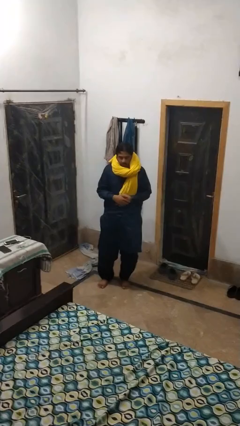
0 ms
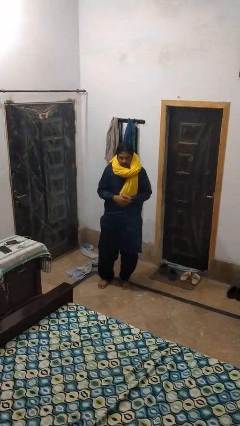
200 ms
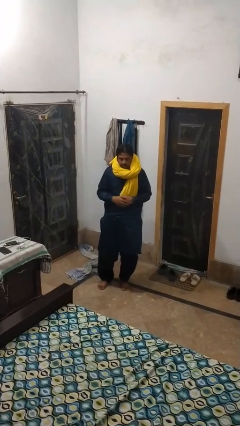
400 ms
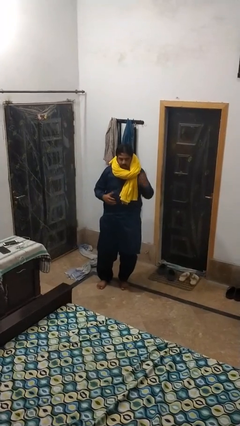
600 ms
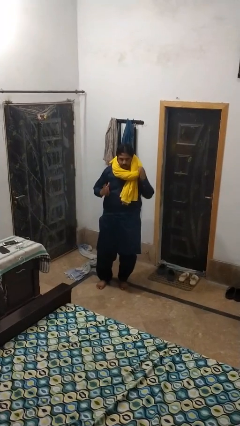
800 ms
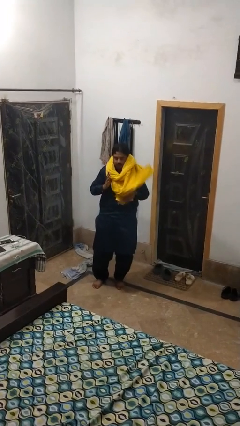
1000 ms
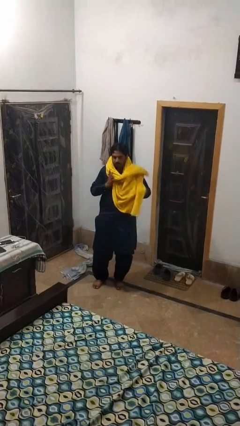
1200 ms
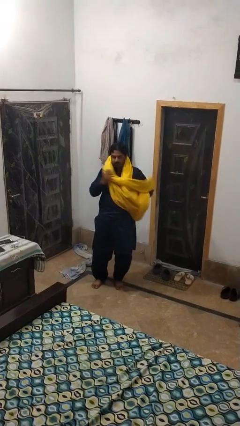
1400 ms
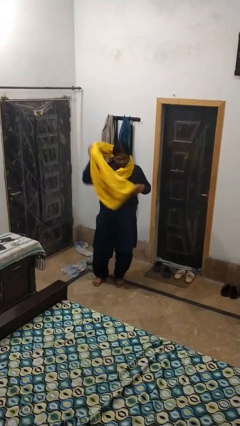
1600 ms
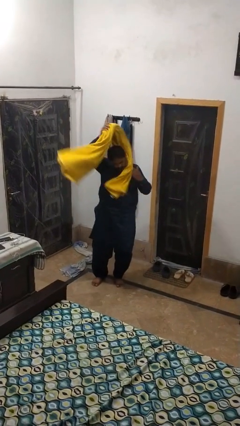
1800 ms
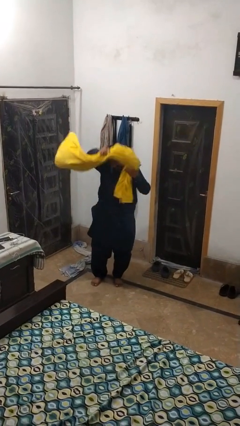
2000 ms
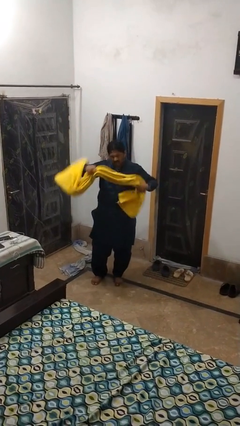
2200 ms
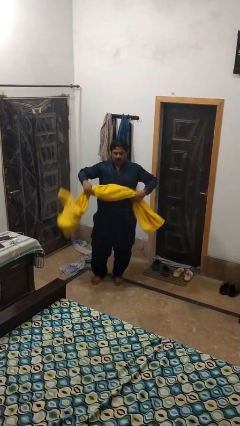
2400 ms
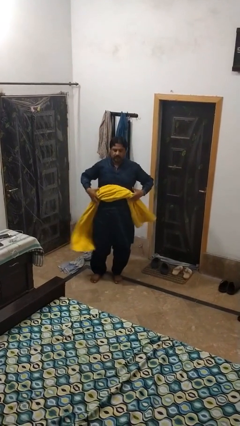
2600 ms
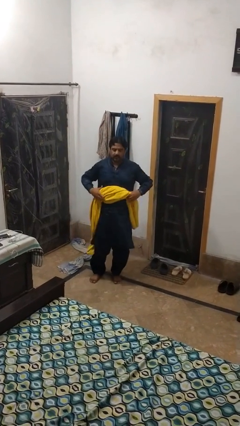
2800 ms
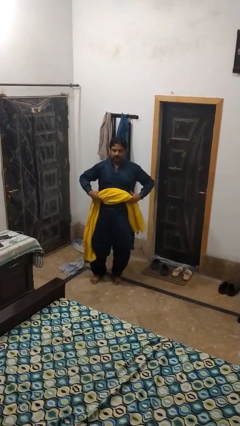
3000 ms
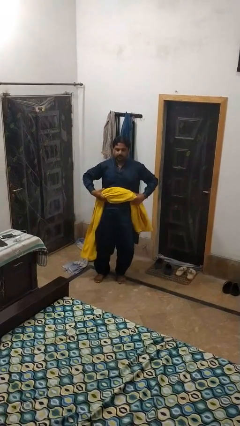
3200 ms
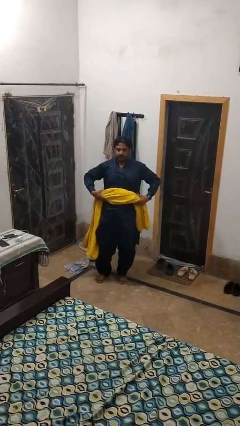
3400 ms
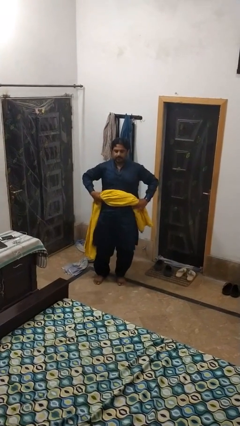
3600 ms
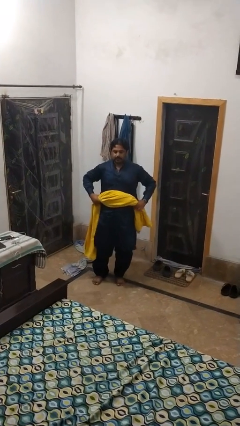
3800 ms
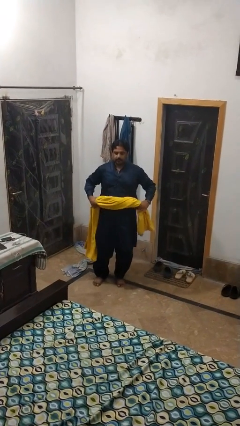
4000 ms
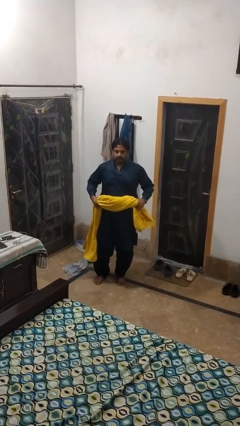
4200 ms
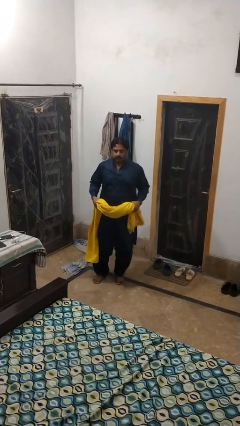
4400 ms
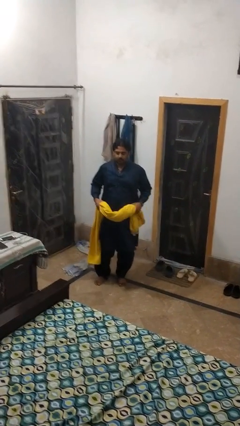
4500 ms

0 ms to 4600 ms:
person takes off scarf

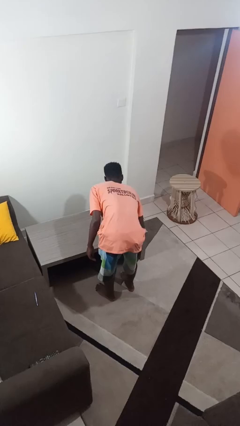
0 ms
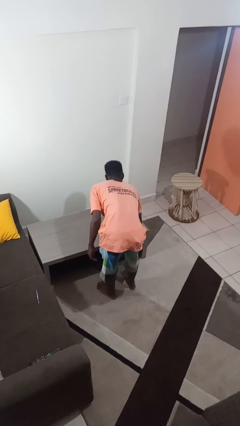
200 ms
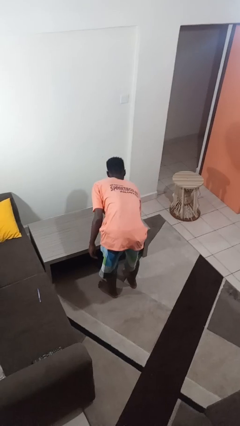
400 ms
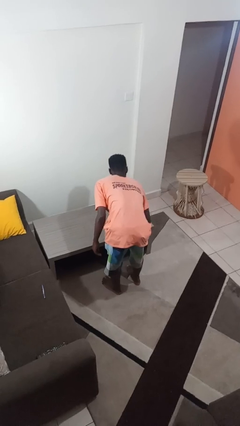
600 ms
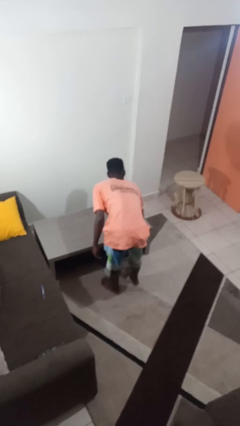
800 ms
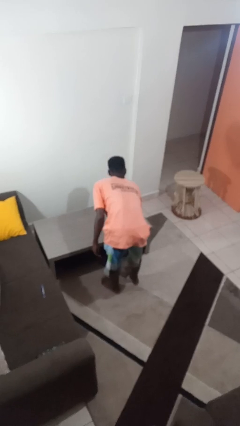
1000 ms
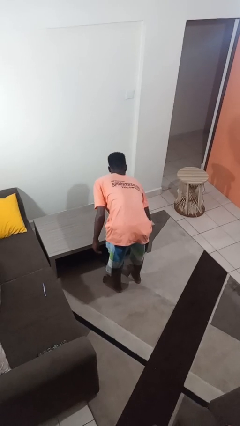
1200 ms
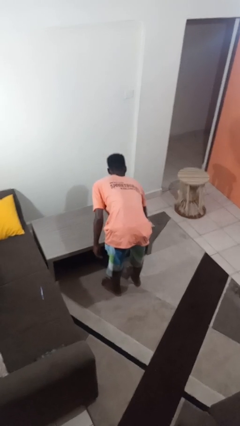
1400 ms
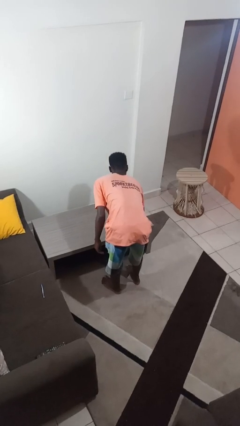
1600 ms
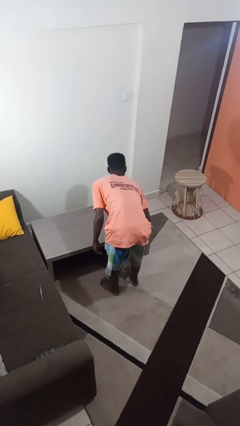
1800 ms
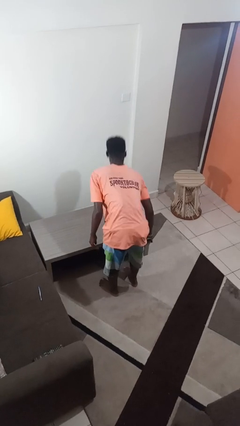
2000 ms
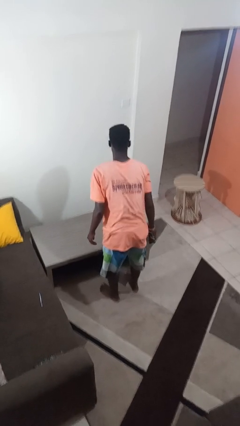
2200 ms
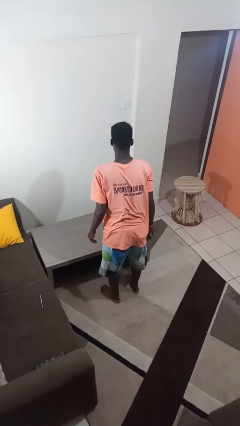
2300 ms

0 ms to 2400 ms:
person cleans table with rag

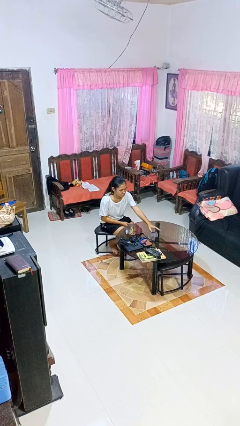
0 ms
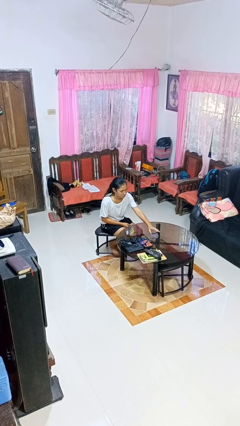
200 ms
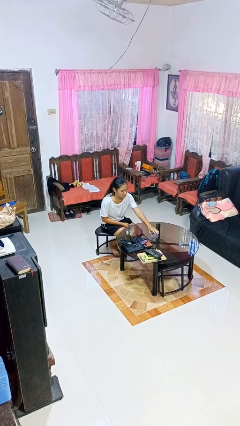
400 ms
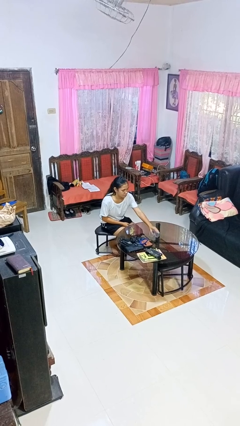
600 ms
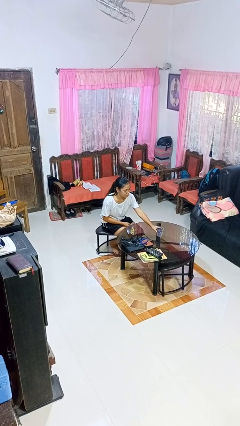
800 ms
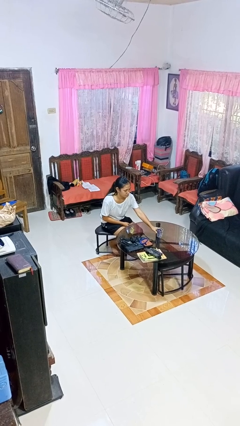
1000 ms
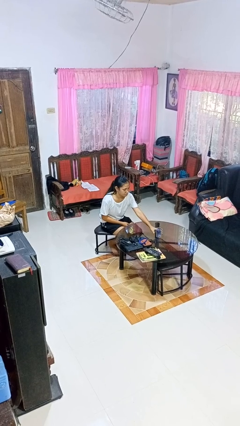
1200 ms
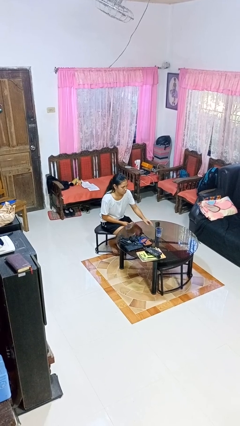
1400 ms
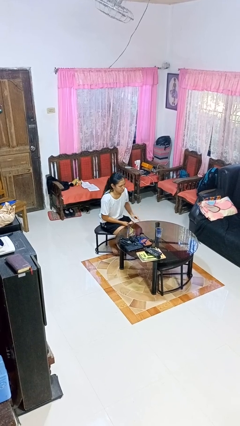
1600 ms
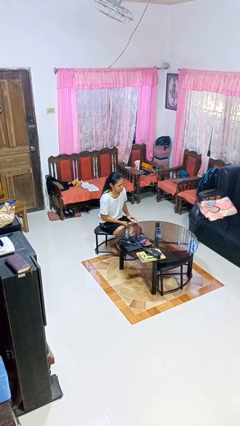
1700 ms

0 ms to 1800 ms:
person sets upright glass

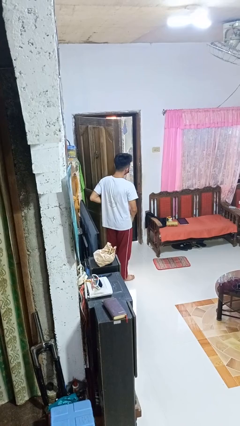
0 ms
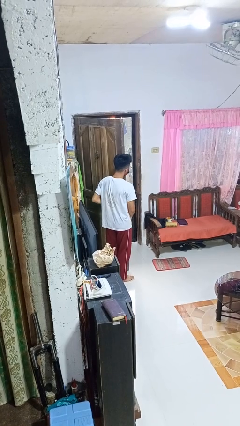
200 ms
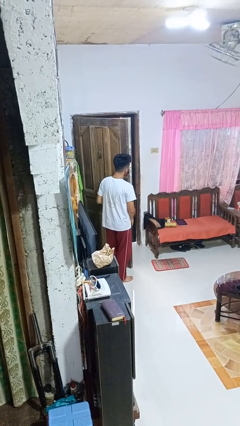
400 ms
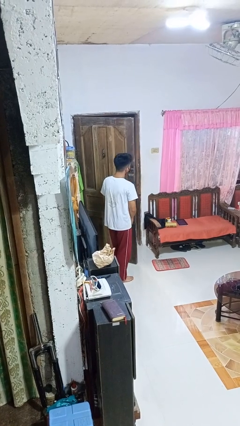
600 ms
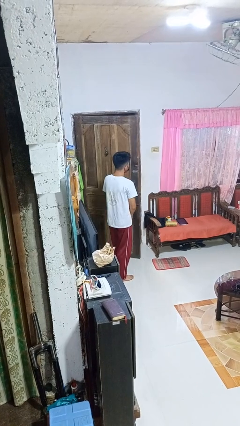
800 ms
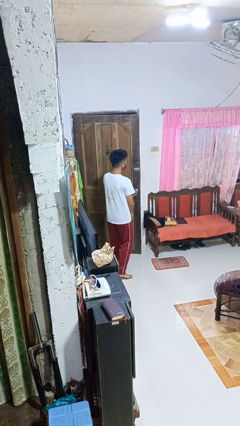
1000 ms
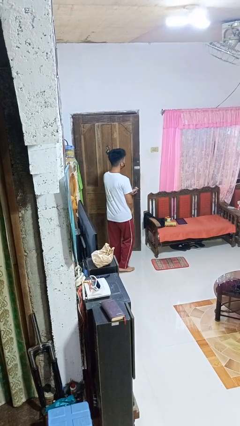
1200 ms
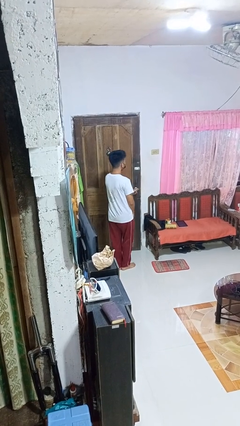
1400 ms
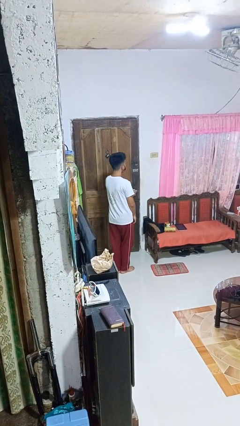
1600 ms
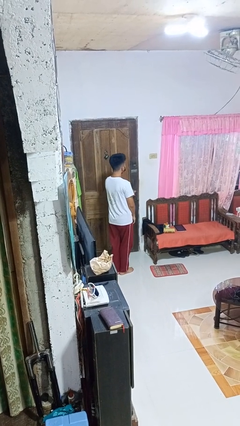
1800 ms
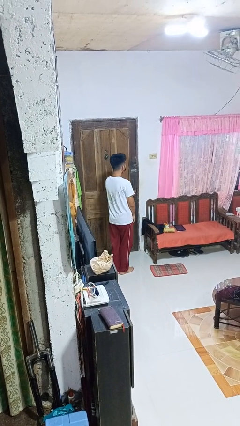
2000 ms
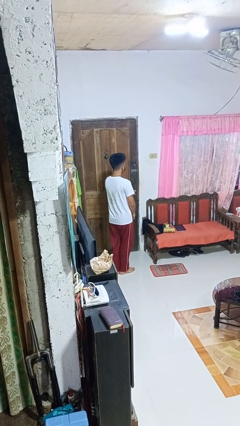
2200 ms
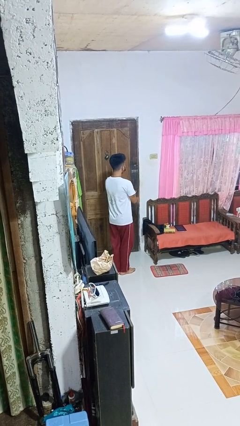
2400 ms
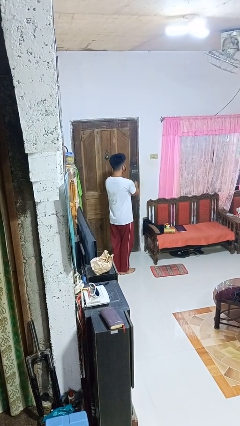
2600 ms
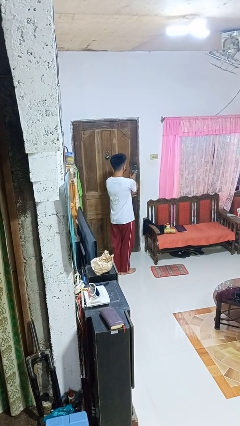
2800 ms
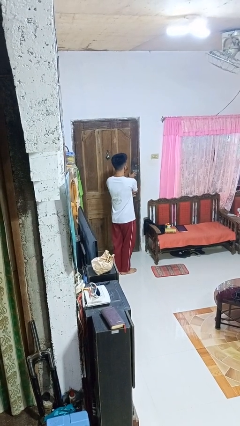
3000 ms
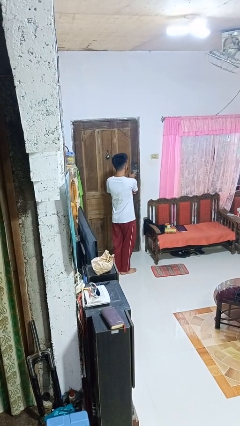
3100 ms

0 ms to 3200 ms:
person closes facility door

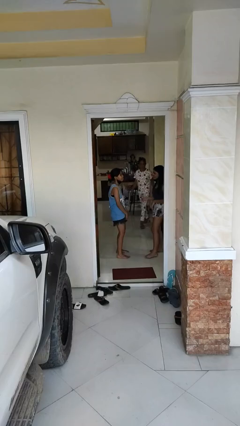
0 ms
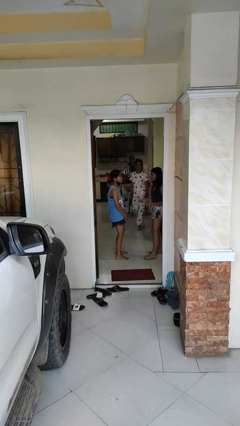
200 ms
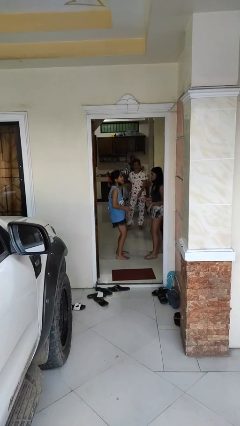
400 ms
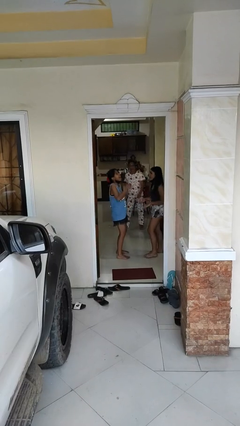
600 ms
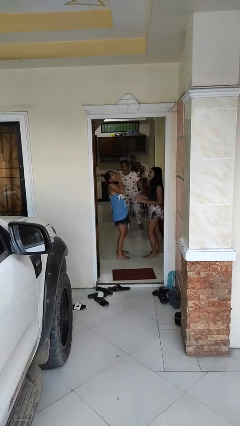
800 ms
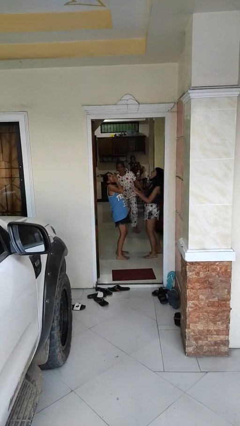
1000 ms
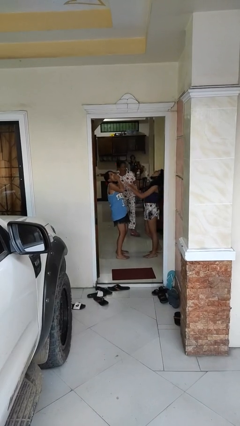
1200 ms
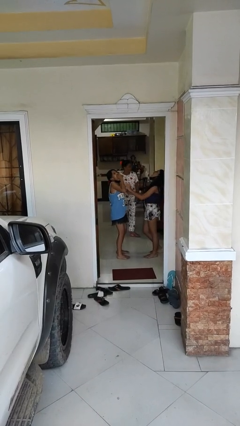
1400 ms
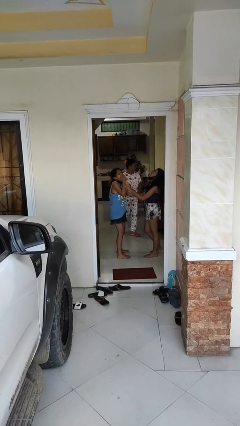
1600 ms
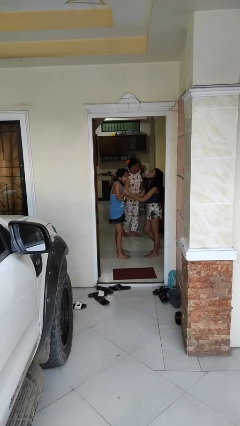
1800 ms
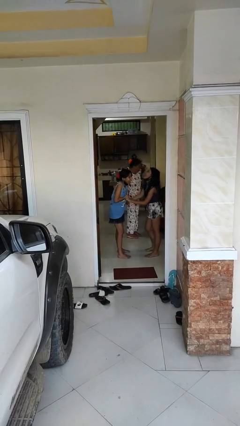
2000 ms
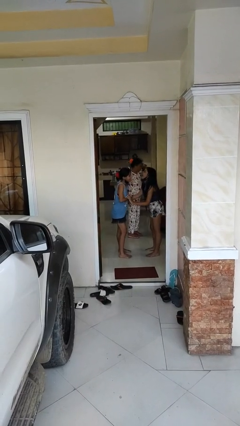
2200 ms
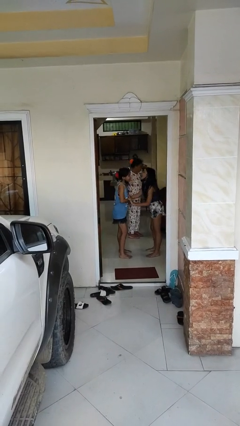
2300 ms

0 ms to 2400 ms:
person laughs with person

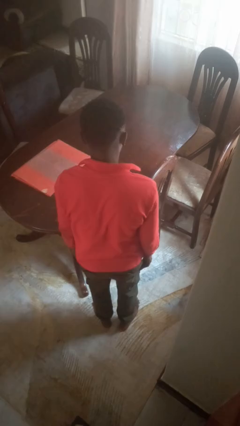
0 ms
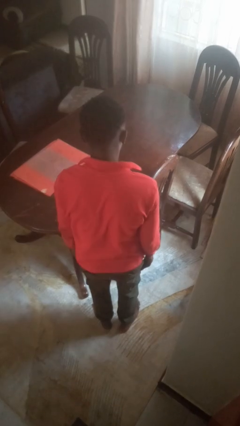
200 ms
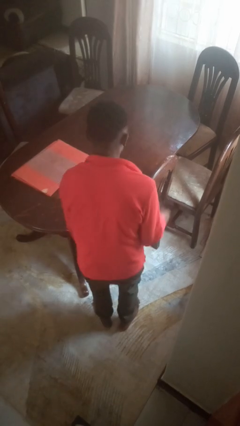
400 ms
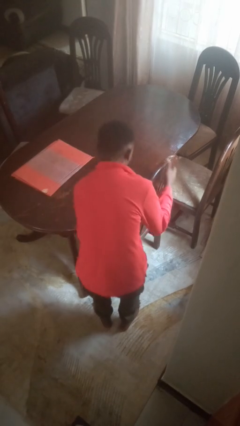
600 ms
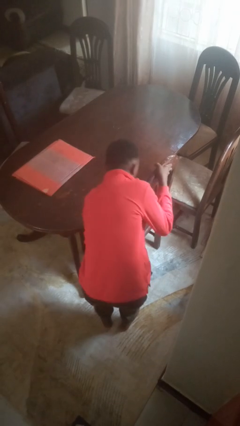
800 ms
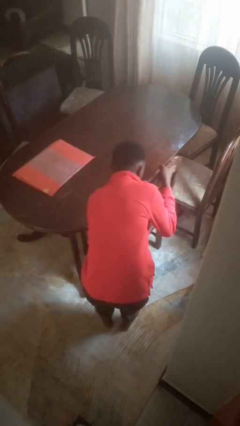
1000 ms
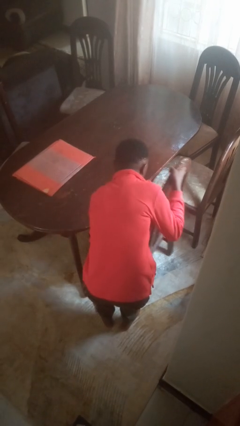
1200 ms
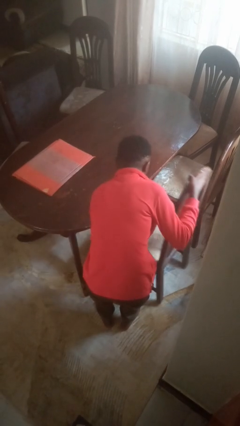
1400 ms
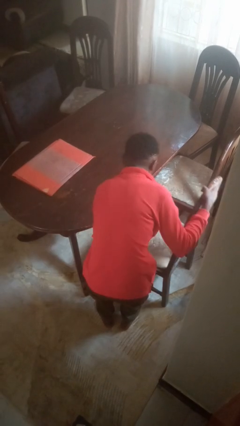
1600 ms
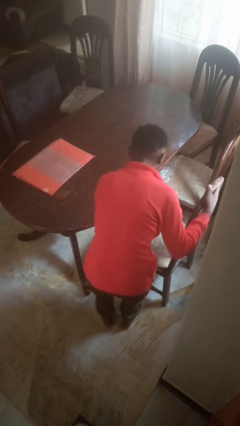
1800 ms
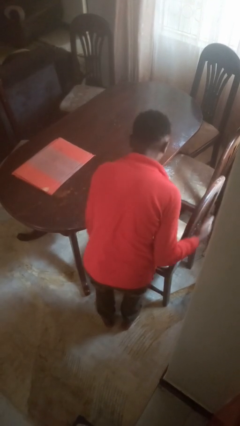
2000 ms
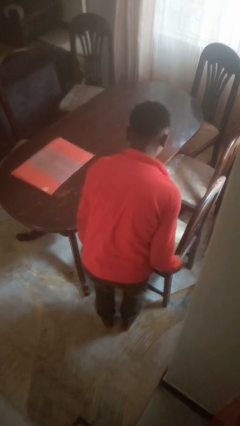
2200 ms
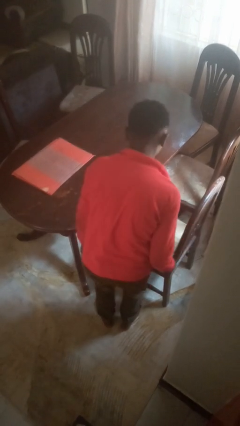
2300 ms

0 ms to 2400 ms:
person pulls out chair

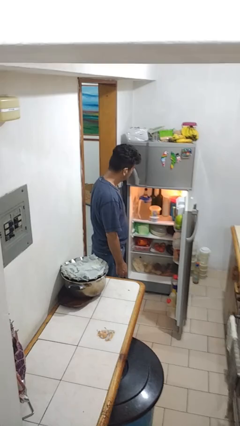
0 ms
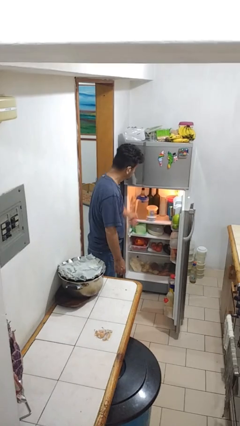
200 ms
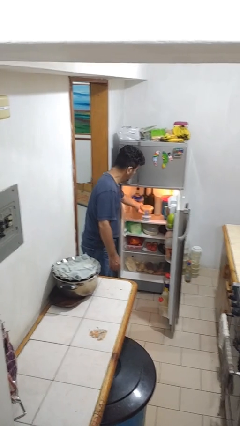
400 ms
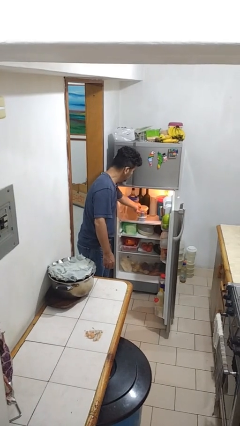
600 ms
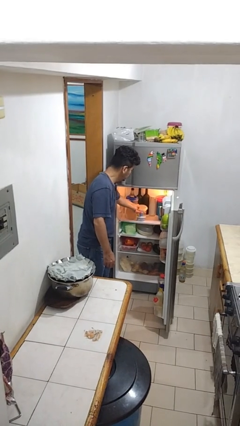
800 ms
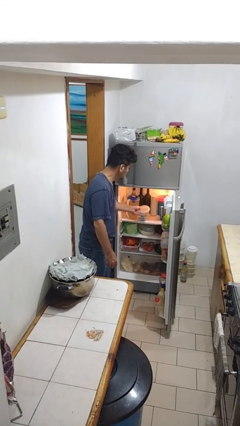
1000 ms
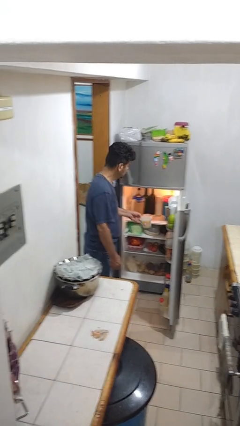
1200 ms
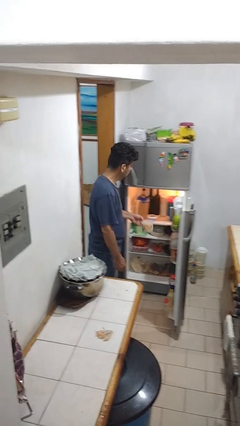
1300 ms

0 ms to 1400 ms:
person takes object from refrigerator
